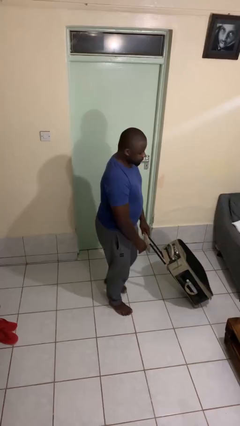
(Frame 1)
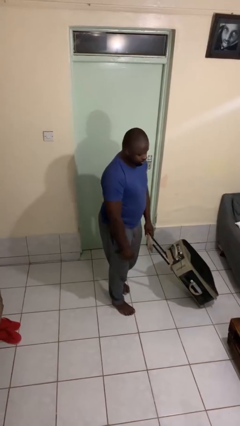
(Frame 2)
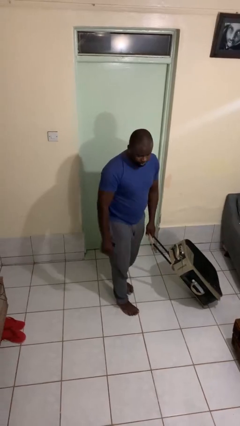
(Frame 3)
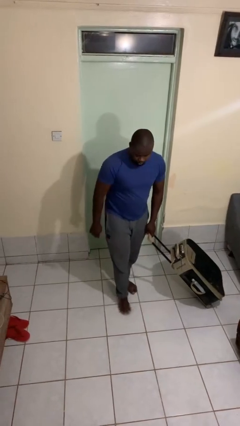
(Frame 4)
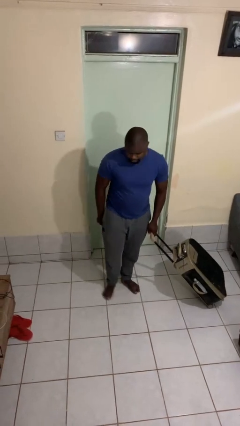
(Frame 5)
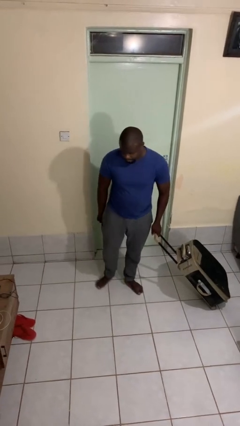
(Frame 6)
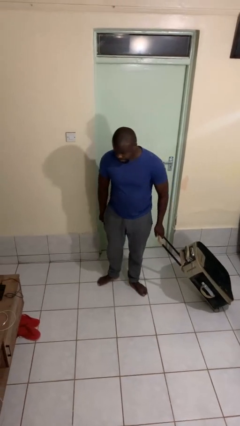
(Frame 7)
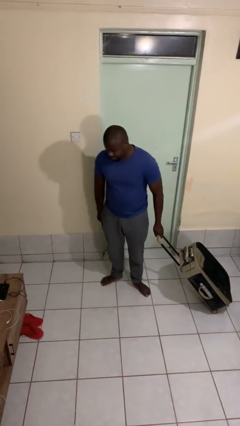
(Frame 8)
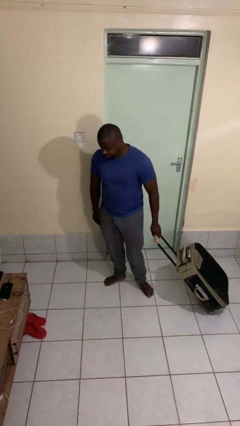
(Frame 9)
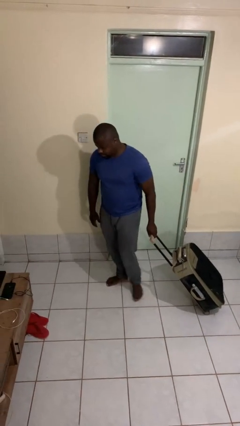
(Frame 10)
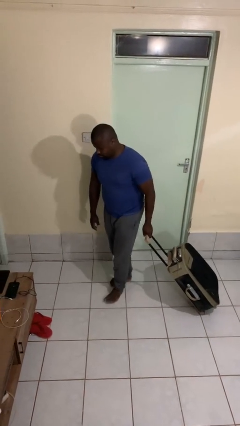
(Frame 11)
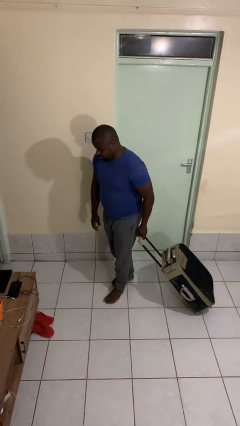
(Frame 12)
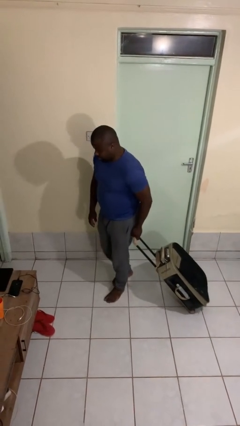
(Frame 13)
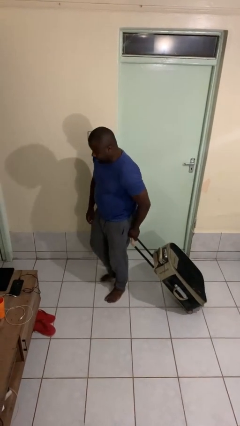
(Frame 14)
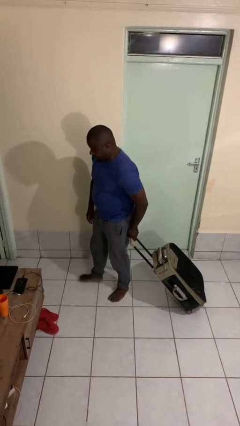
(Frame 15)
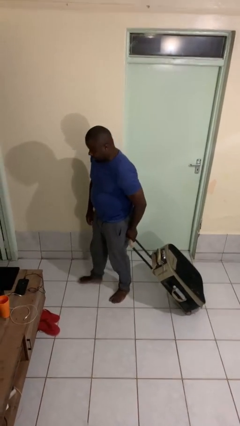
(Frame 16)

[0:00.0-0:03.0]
person pulls wheeled cart

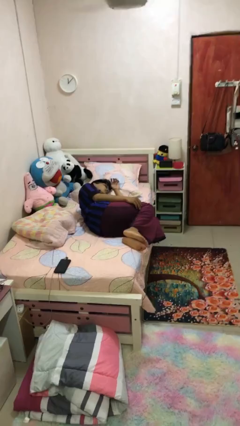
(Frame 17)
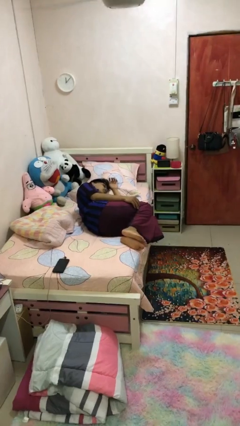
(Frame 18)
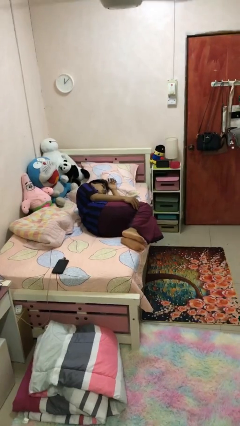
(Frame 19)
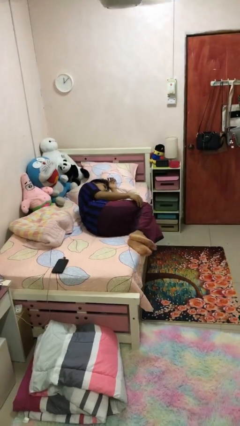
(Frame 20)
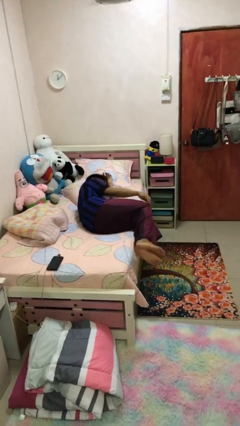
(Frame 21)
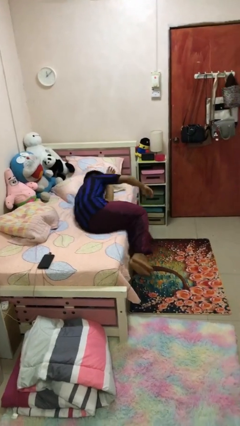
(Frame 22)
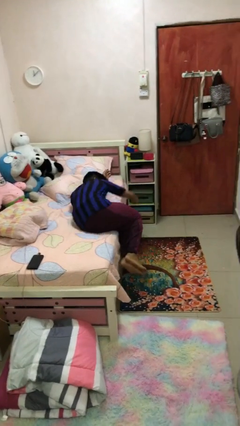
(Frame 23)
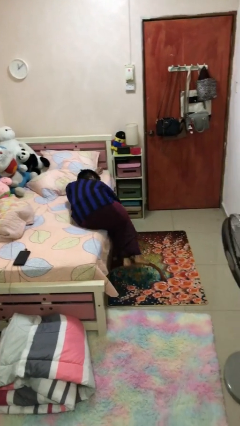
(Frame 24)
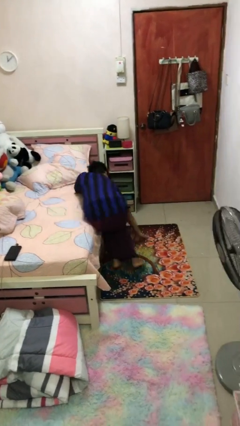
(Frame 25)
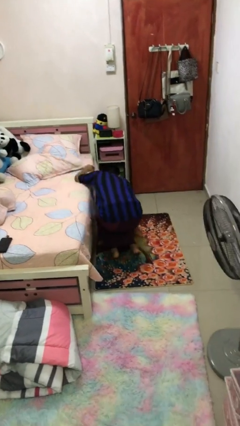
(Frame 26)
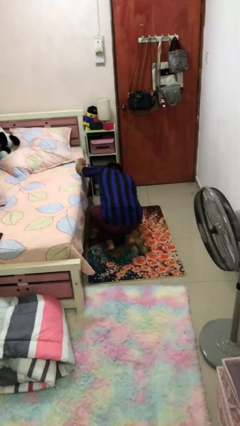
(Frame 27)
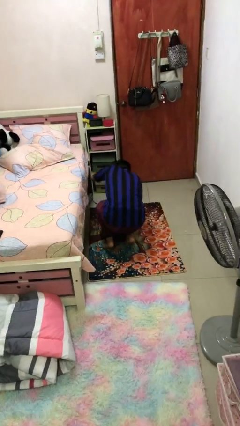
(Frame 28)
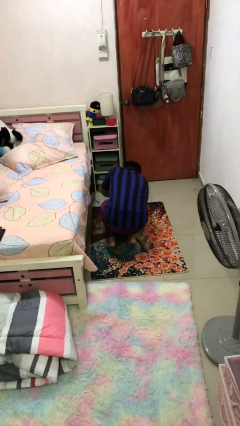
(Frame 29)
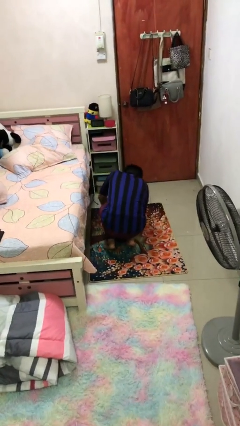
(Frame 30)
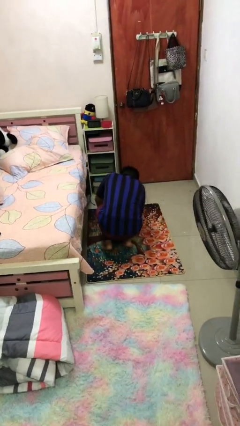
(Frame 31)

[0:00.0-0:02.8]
person falls from bed

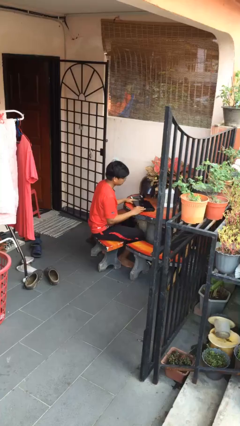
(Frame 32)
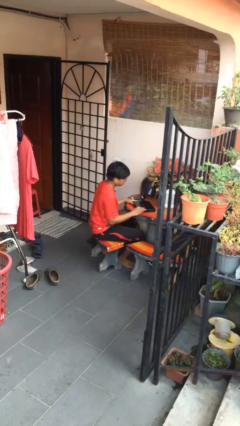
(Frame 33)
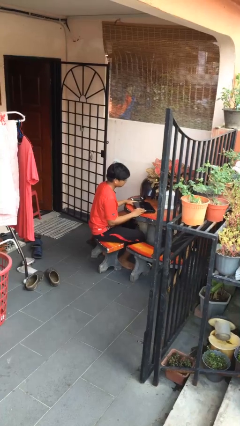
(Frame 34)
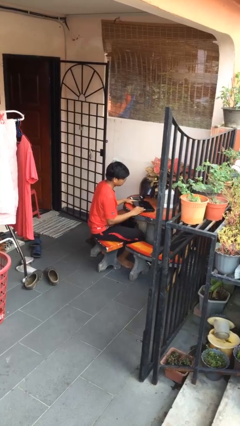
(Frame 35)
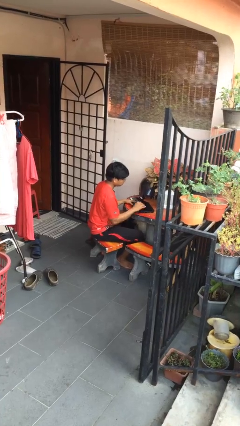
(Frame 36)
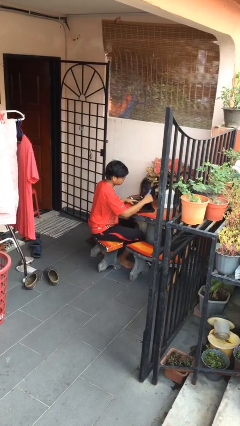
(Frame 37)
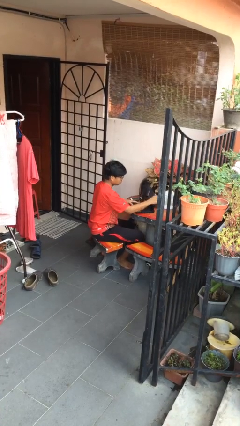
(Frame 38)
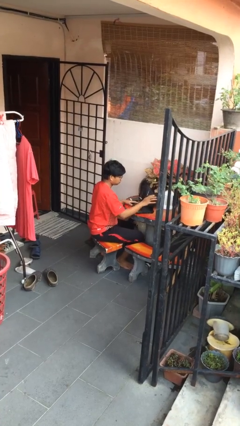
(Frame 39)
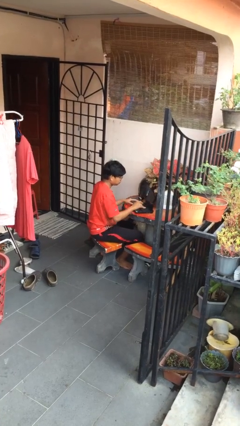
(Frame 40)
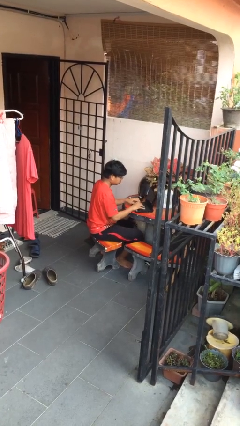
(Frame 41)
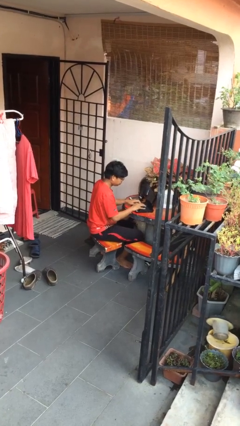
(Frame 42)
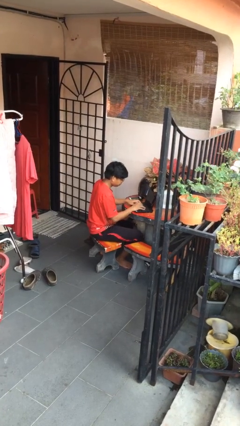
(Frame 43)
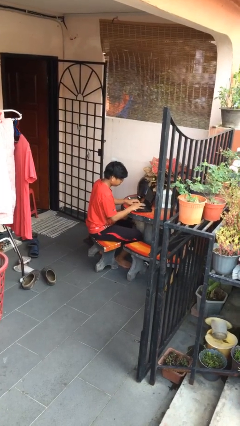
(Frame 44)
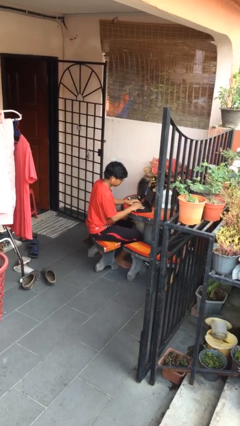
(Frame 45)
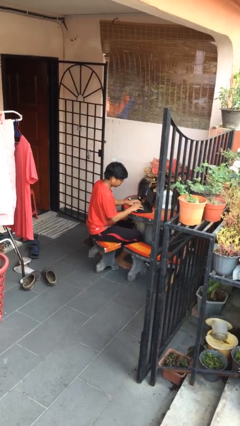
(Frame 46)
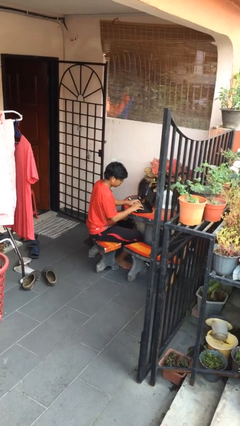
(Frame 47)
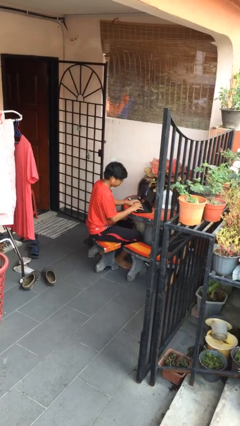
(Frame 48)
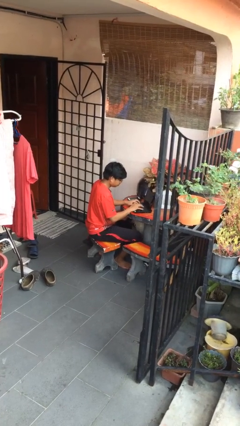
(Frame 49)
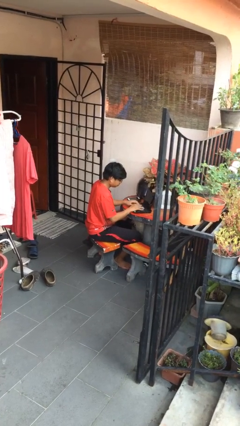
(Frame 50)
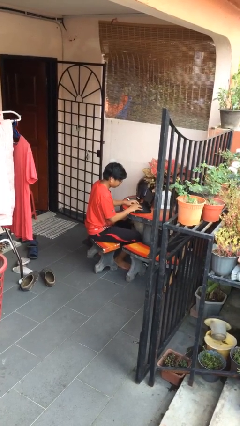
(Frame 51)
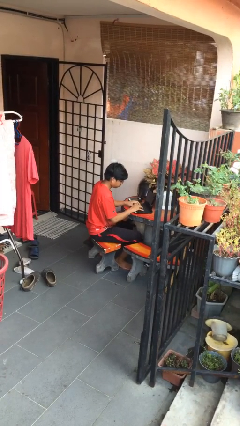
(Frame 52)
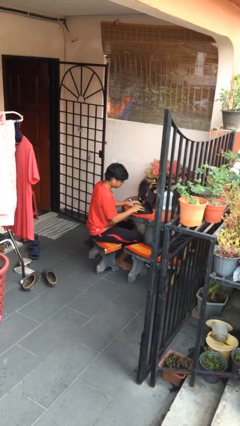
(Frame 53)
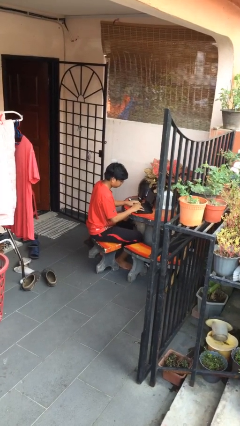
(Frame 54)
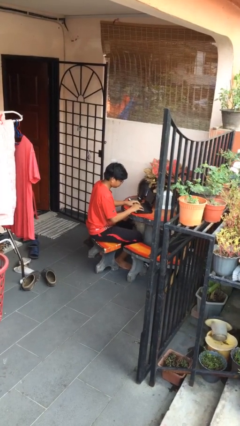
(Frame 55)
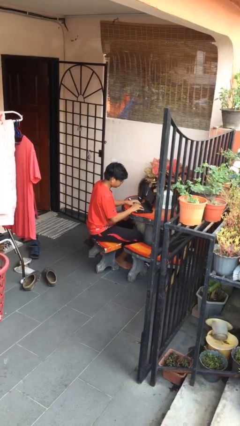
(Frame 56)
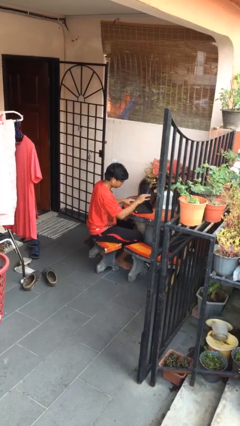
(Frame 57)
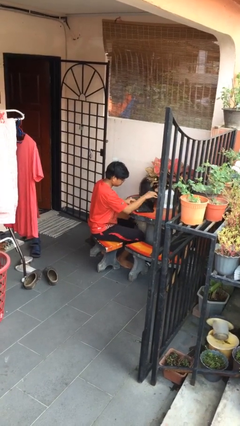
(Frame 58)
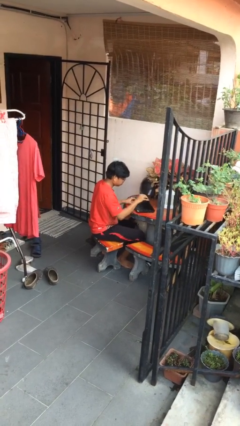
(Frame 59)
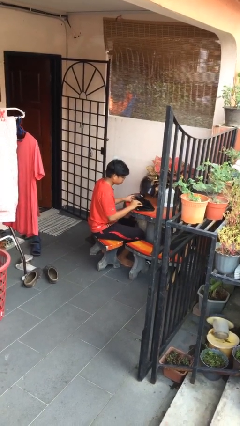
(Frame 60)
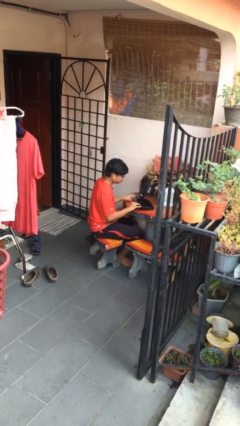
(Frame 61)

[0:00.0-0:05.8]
person interacts with laptop

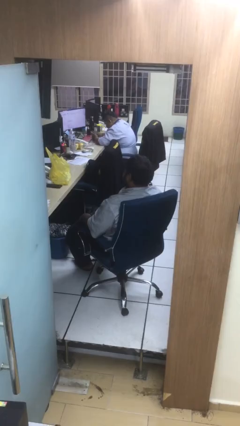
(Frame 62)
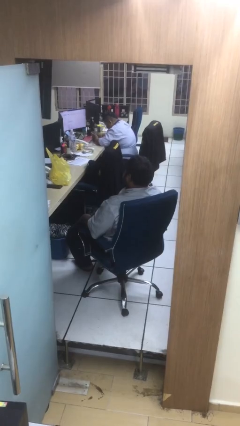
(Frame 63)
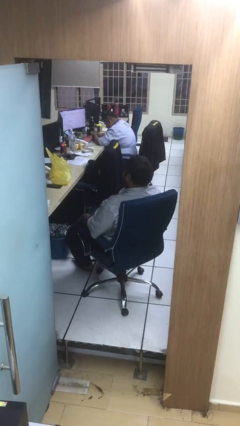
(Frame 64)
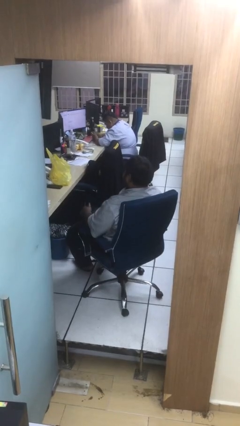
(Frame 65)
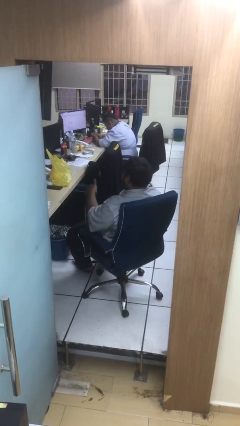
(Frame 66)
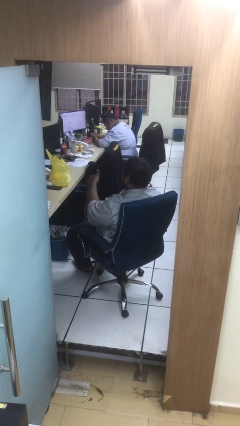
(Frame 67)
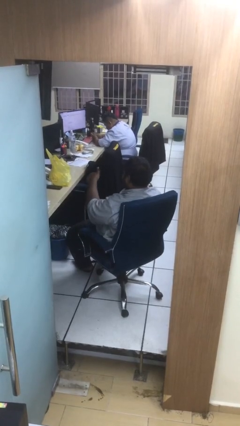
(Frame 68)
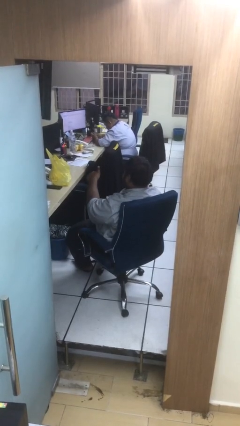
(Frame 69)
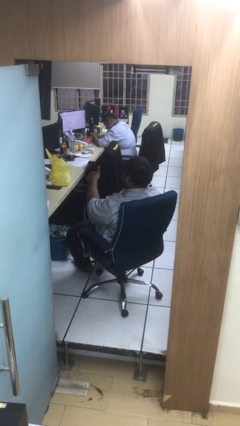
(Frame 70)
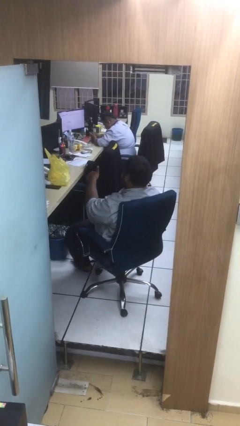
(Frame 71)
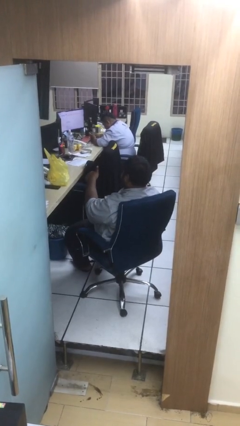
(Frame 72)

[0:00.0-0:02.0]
person gestures thumbs up

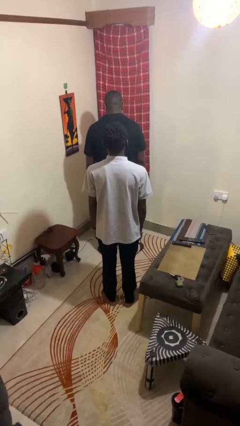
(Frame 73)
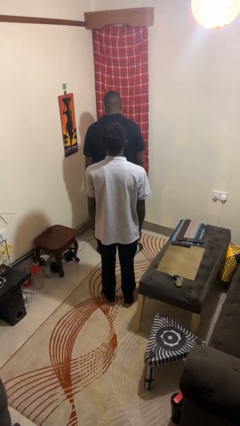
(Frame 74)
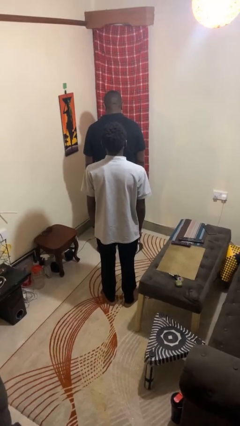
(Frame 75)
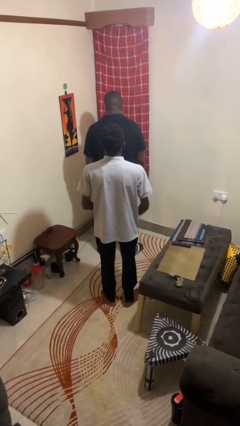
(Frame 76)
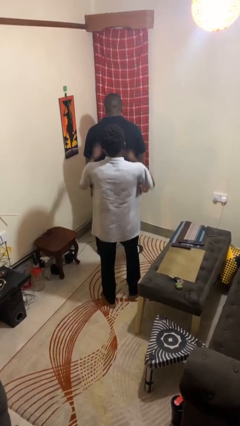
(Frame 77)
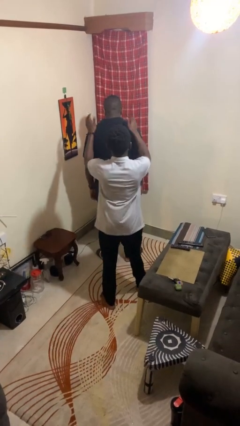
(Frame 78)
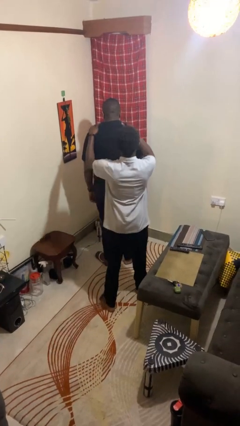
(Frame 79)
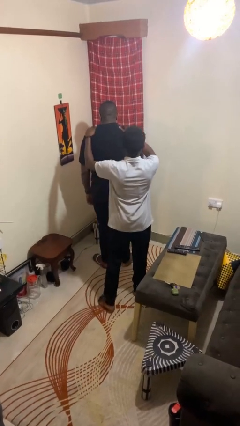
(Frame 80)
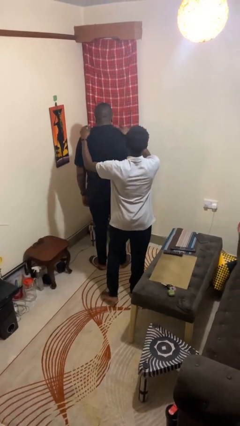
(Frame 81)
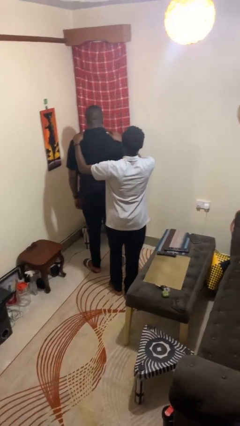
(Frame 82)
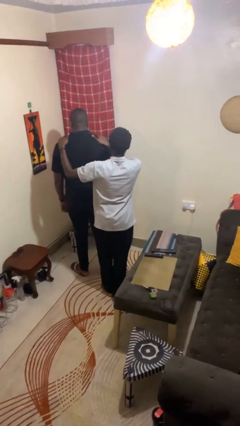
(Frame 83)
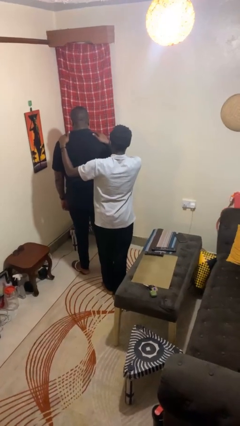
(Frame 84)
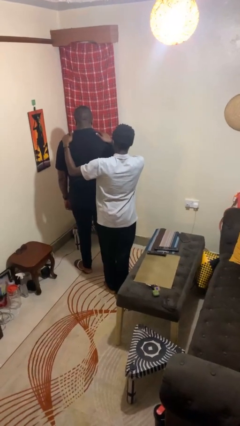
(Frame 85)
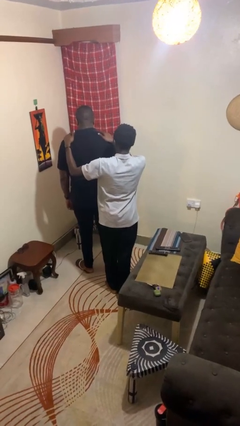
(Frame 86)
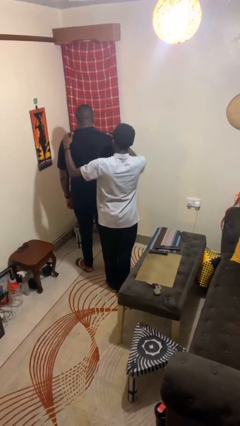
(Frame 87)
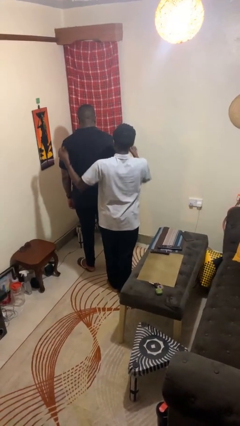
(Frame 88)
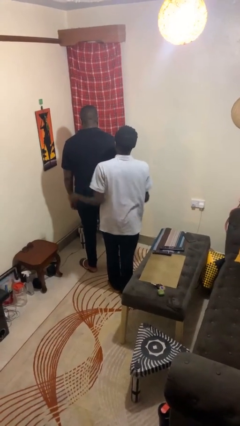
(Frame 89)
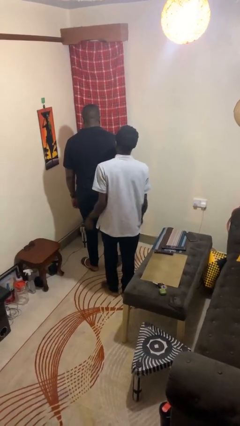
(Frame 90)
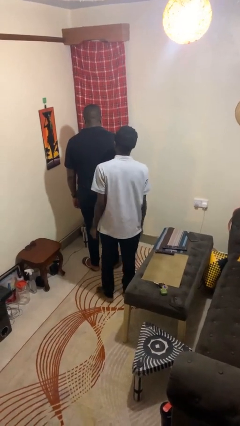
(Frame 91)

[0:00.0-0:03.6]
person pounds shoulders of person

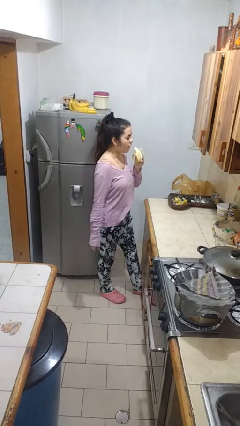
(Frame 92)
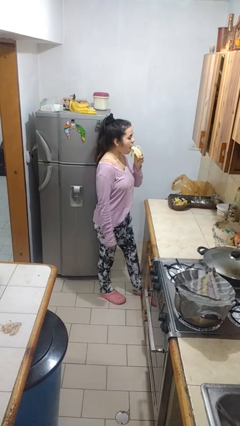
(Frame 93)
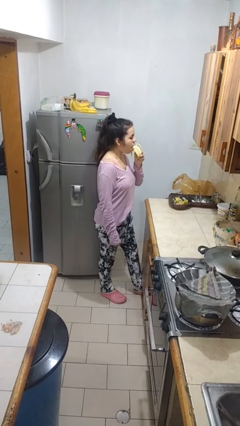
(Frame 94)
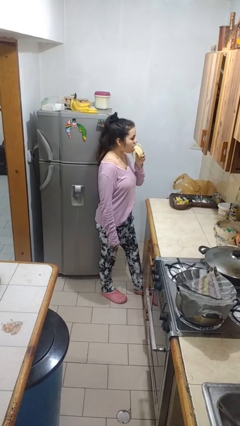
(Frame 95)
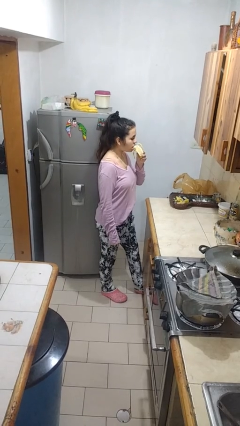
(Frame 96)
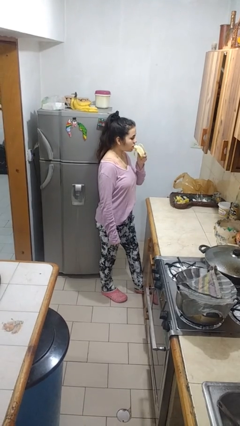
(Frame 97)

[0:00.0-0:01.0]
person eats banana
